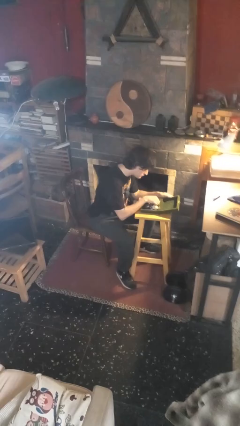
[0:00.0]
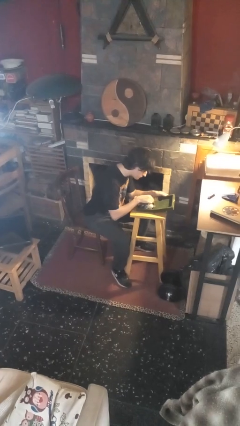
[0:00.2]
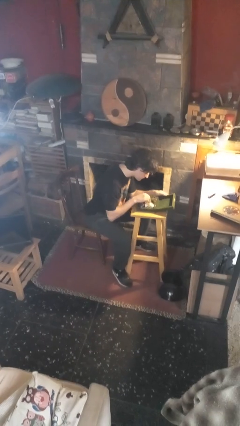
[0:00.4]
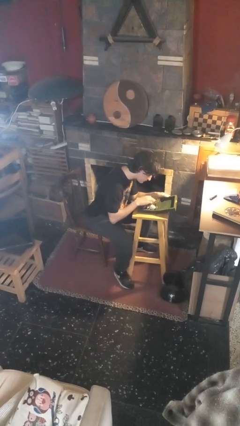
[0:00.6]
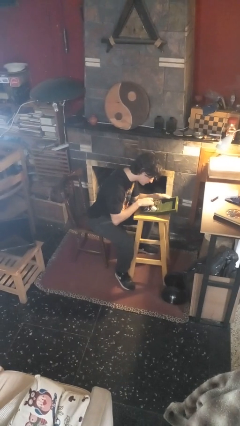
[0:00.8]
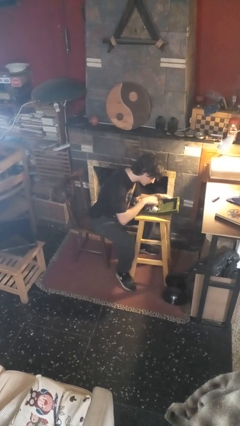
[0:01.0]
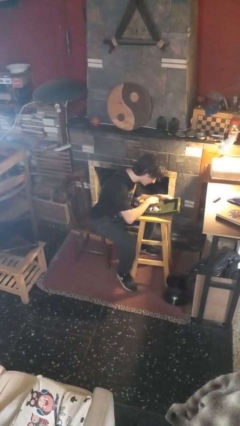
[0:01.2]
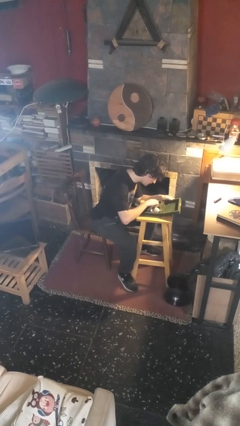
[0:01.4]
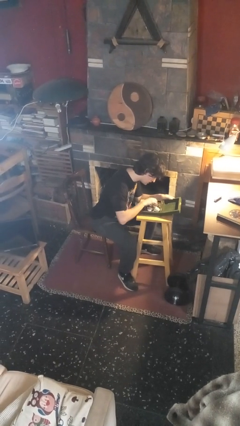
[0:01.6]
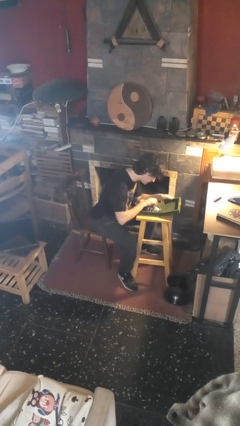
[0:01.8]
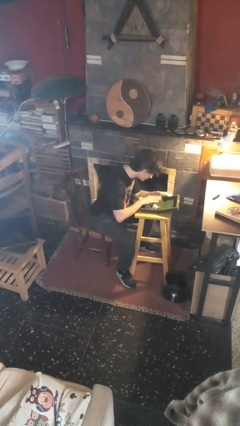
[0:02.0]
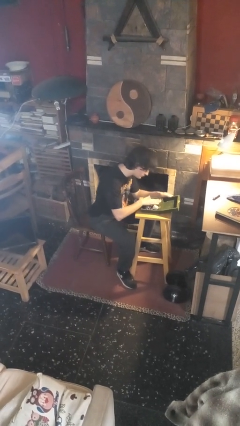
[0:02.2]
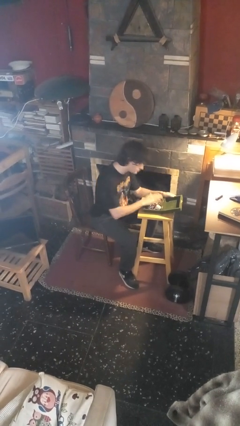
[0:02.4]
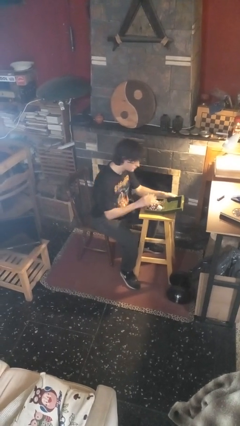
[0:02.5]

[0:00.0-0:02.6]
person searches jewelry box

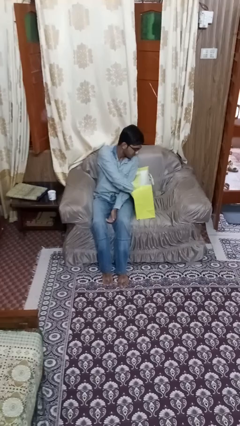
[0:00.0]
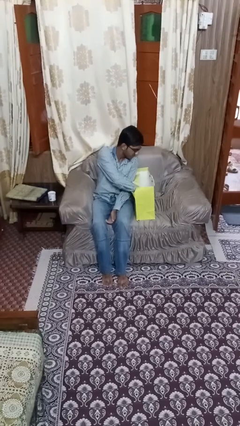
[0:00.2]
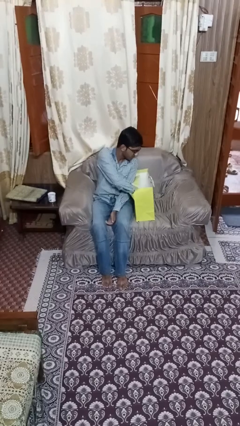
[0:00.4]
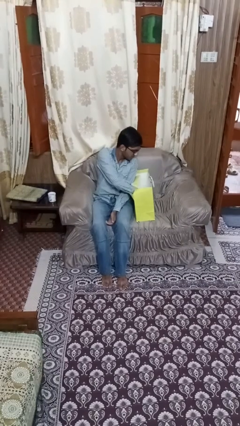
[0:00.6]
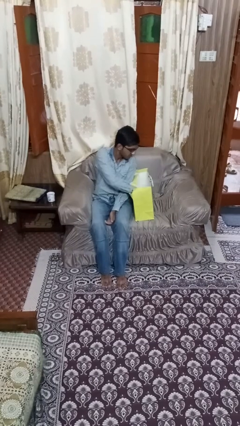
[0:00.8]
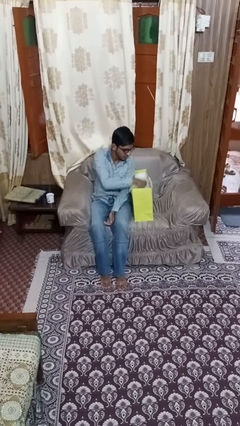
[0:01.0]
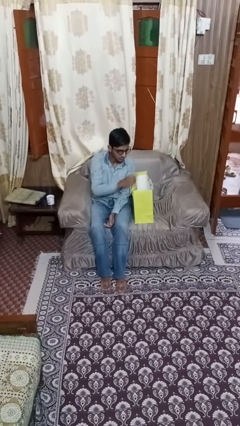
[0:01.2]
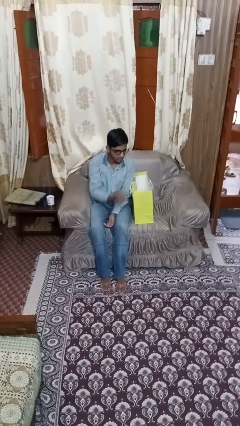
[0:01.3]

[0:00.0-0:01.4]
person searches in bag

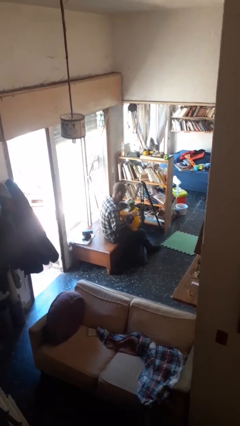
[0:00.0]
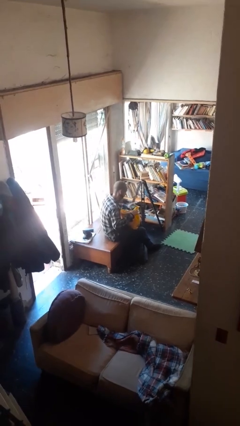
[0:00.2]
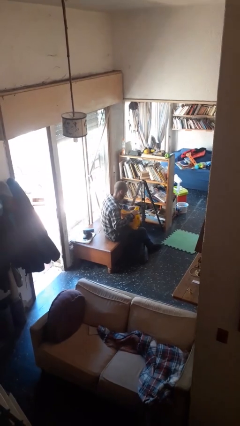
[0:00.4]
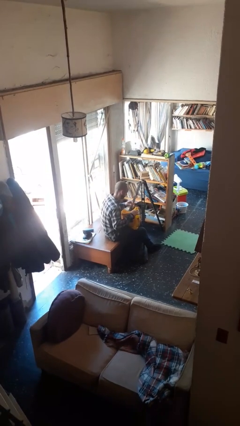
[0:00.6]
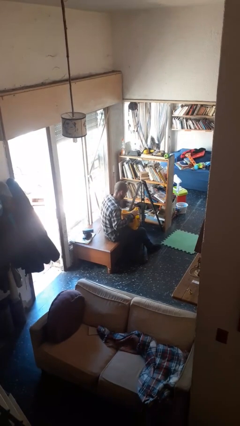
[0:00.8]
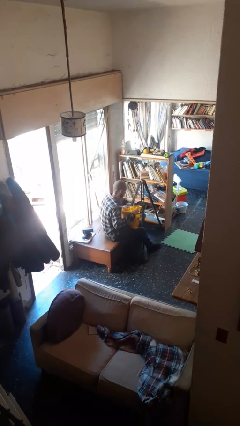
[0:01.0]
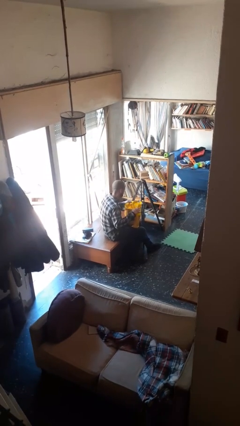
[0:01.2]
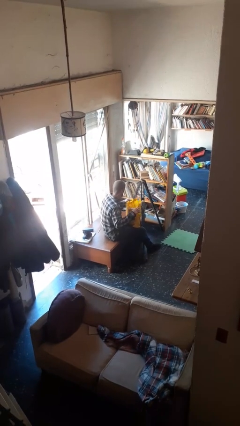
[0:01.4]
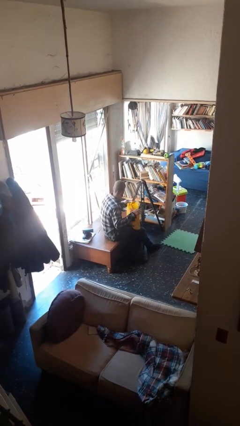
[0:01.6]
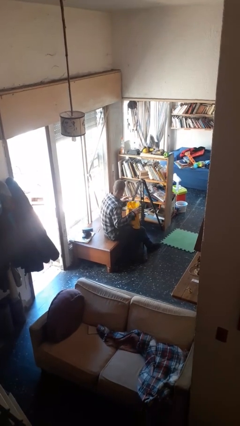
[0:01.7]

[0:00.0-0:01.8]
person puts object into bag

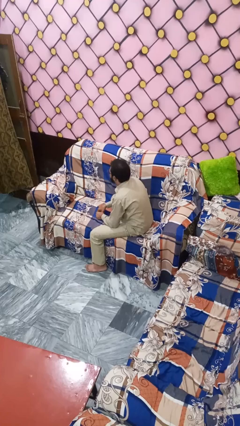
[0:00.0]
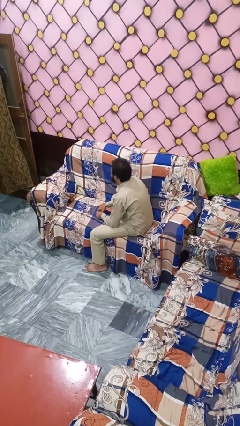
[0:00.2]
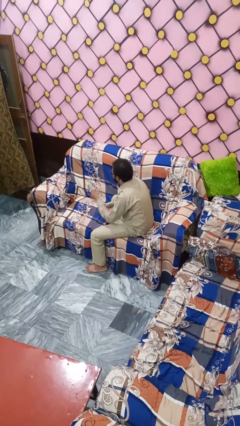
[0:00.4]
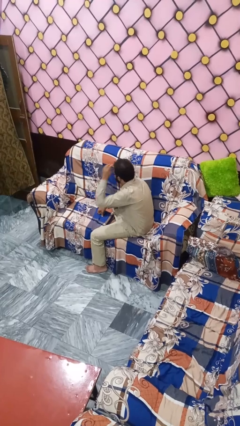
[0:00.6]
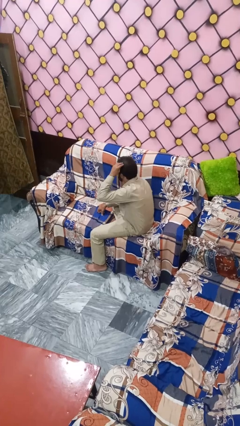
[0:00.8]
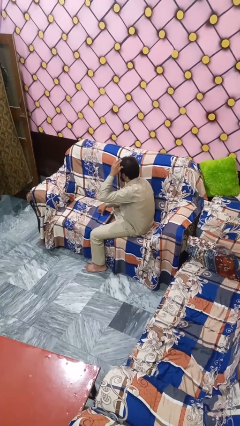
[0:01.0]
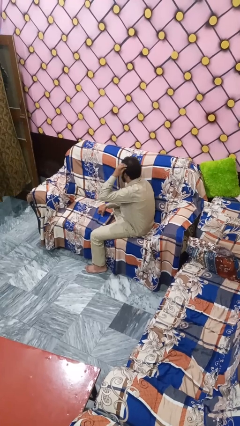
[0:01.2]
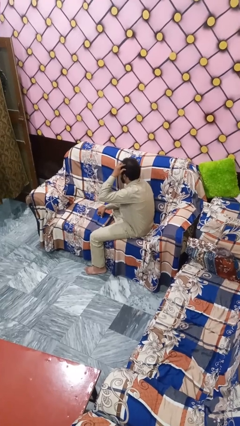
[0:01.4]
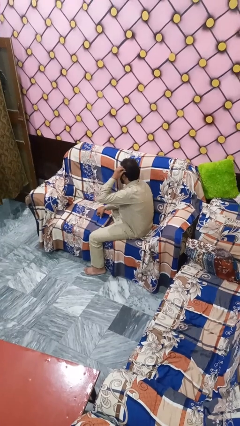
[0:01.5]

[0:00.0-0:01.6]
person strokes hair

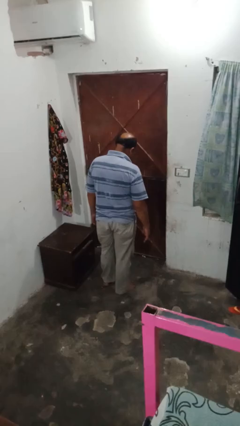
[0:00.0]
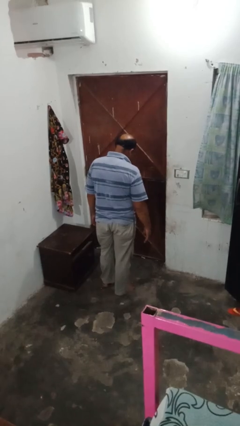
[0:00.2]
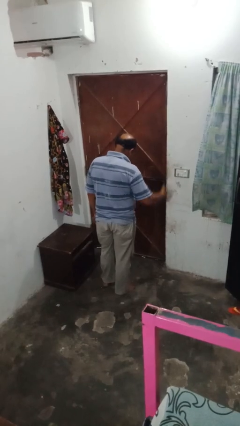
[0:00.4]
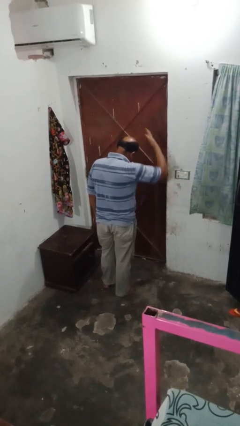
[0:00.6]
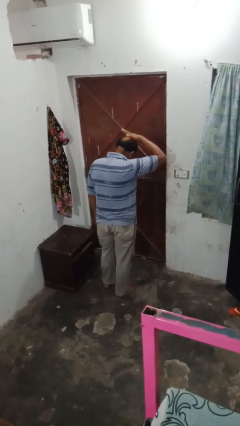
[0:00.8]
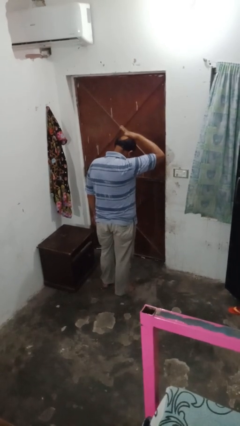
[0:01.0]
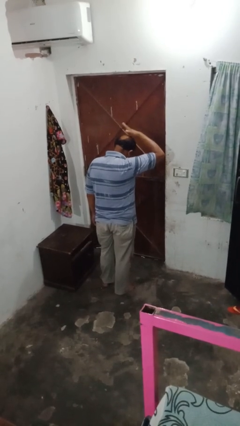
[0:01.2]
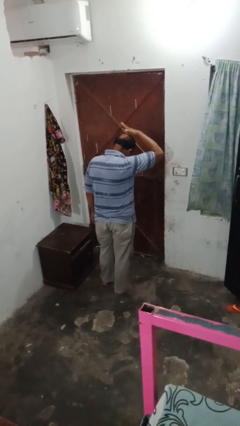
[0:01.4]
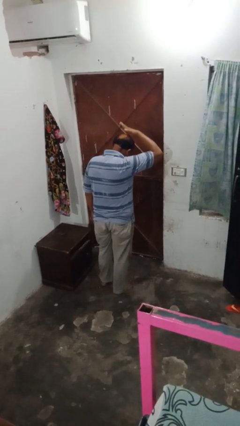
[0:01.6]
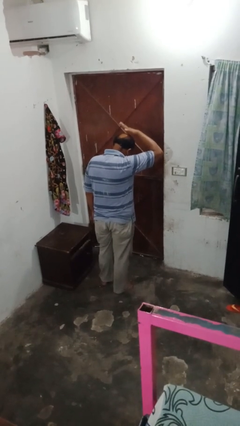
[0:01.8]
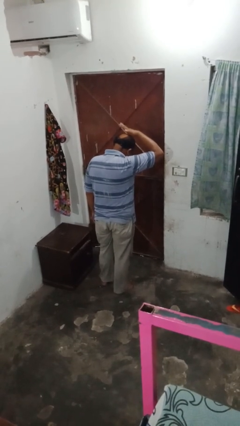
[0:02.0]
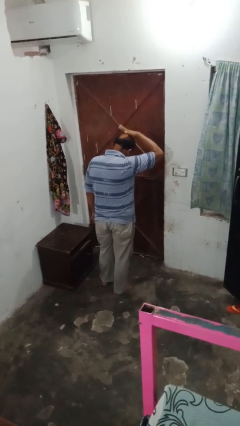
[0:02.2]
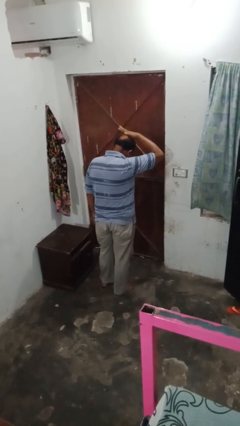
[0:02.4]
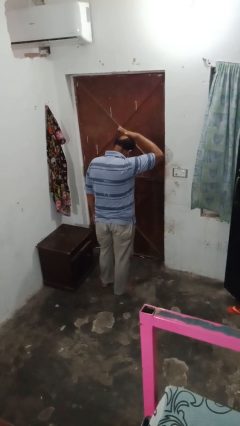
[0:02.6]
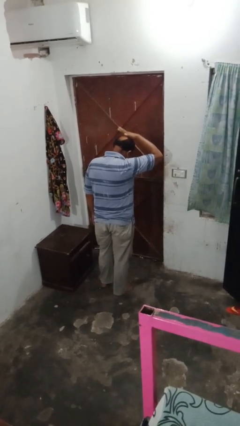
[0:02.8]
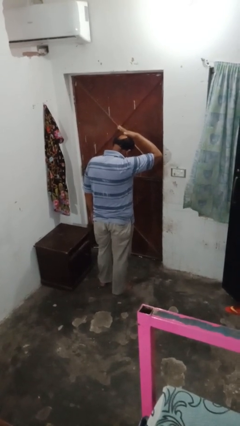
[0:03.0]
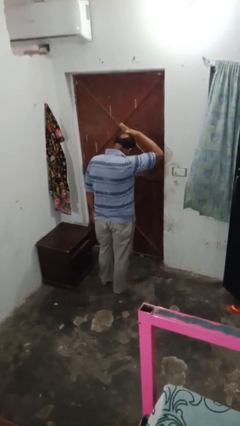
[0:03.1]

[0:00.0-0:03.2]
person pats head

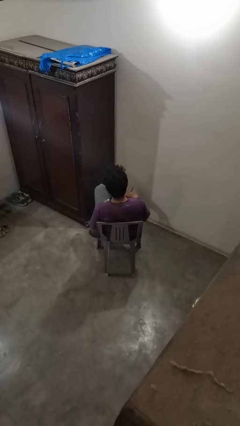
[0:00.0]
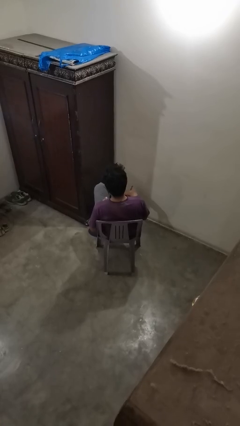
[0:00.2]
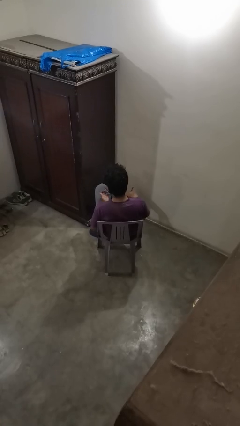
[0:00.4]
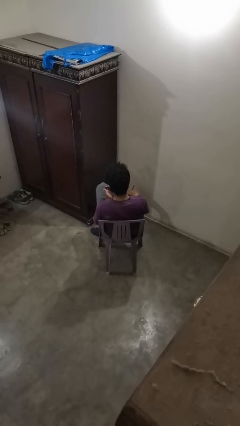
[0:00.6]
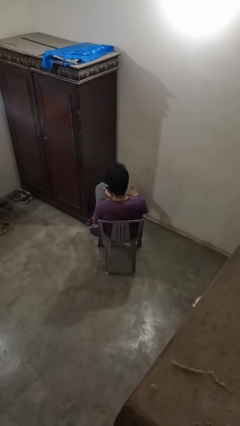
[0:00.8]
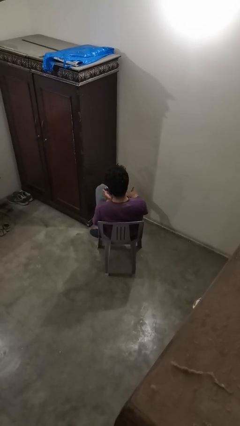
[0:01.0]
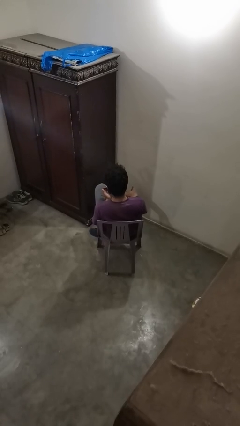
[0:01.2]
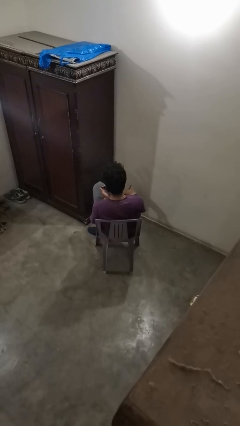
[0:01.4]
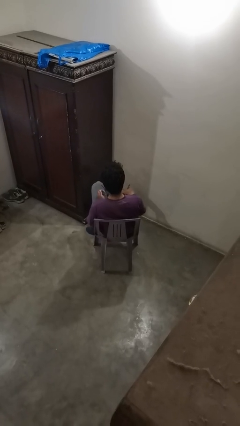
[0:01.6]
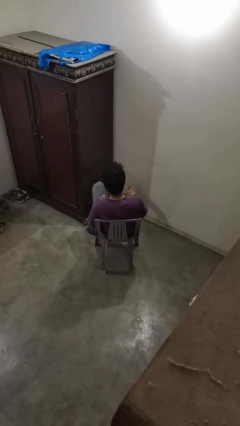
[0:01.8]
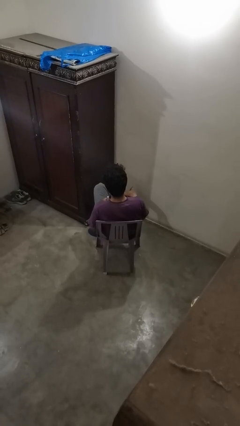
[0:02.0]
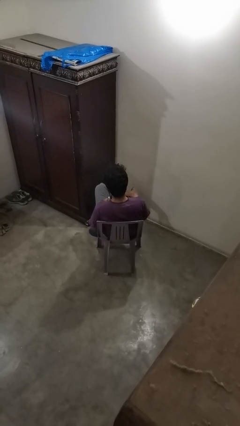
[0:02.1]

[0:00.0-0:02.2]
person clips fingernails

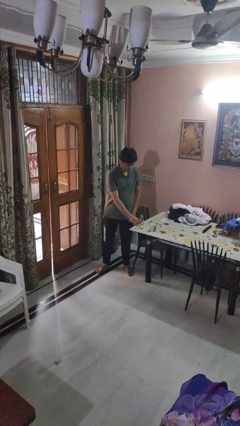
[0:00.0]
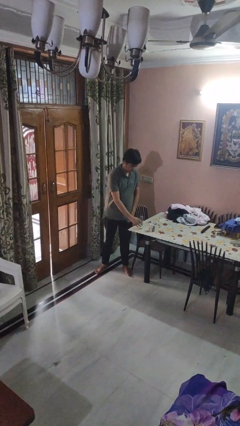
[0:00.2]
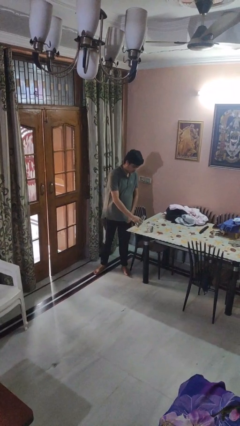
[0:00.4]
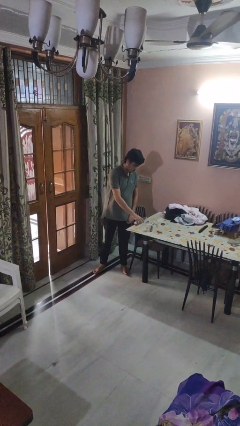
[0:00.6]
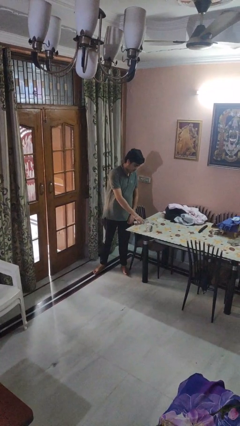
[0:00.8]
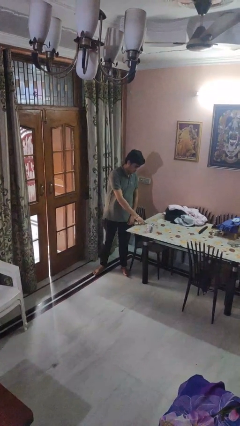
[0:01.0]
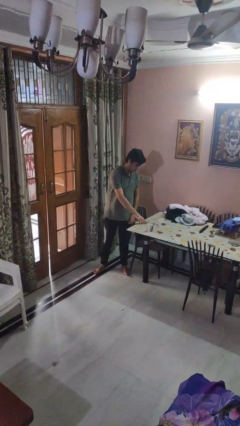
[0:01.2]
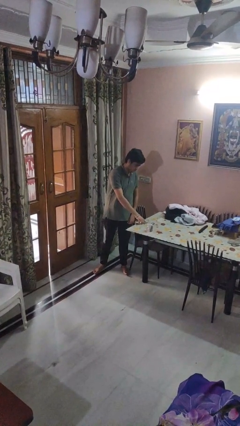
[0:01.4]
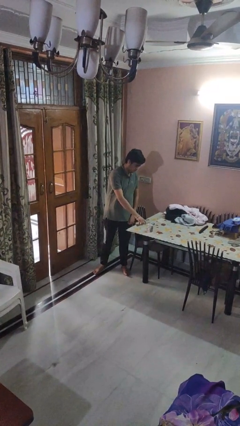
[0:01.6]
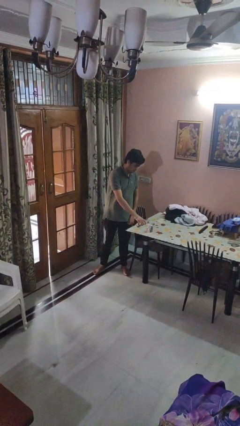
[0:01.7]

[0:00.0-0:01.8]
person pours liquid into cup

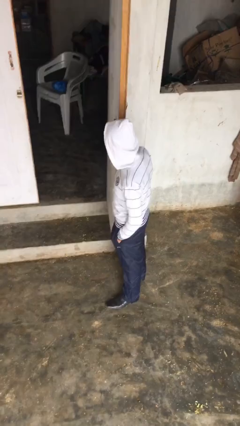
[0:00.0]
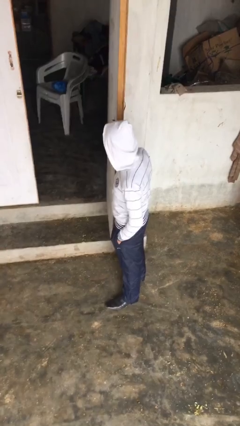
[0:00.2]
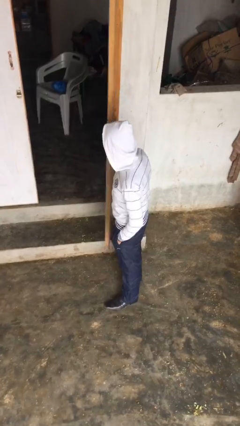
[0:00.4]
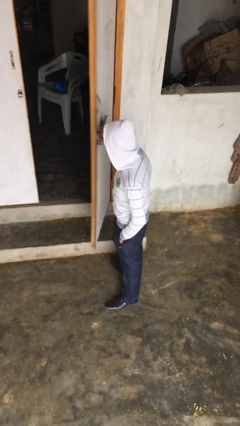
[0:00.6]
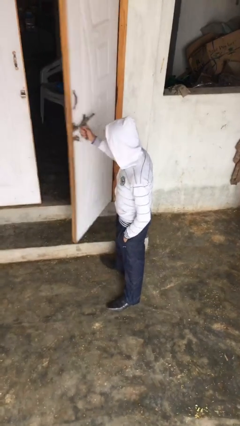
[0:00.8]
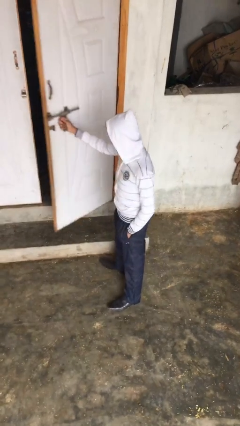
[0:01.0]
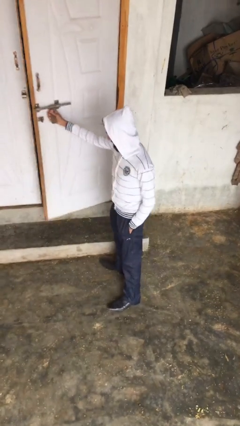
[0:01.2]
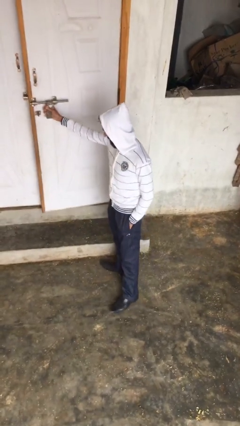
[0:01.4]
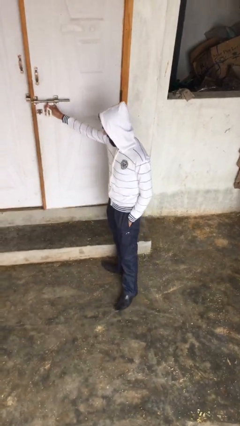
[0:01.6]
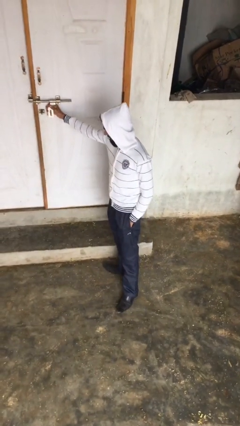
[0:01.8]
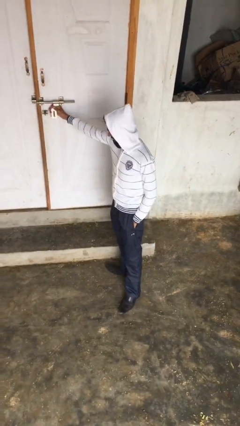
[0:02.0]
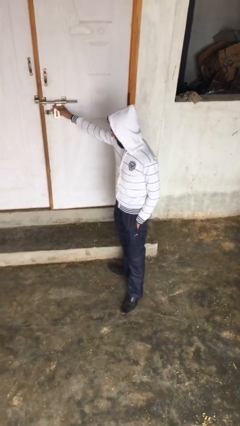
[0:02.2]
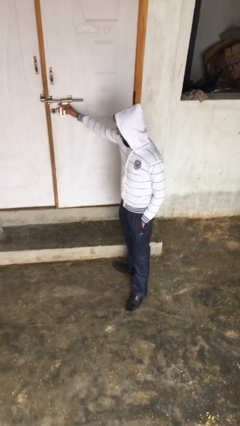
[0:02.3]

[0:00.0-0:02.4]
person closes facility door
